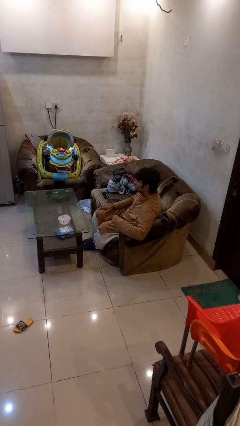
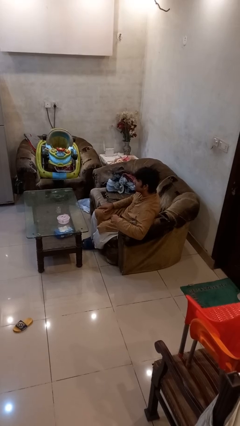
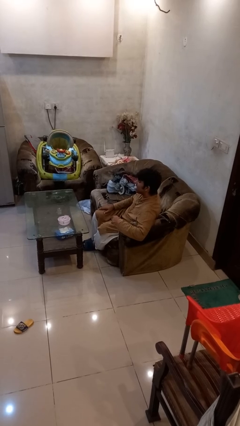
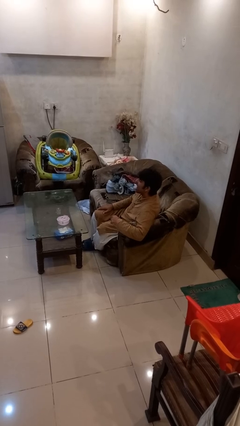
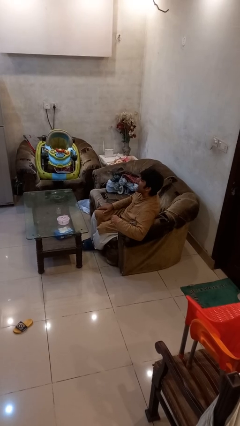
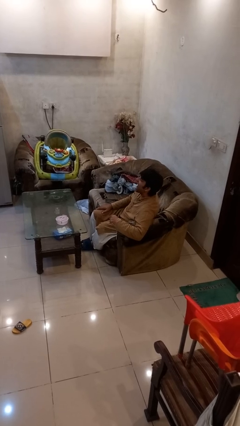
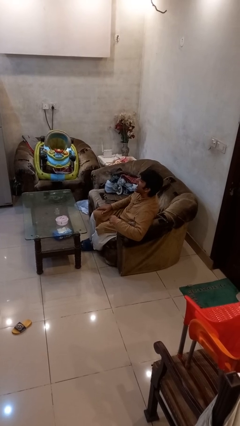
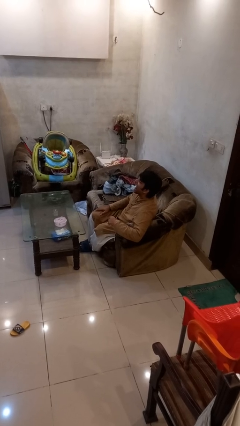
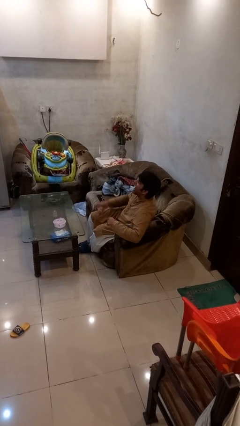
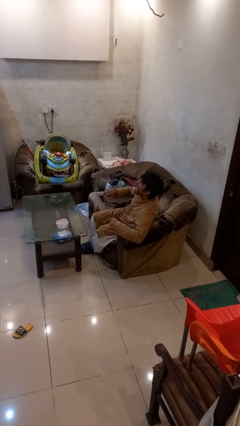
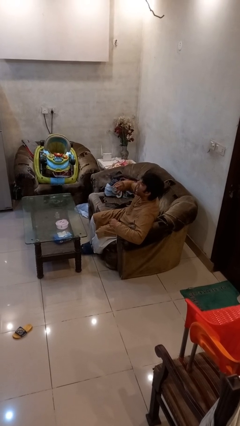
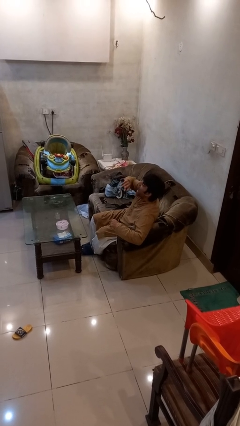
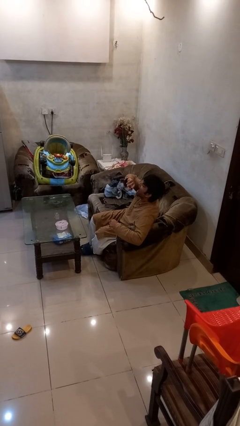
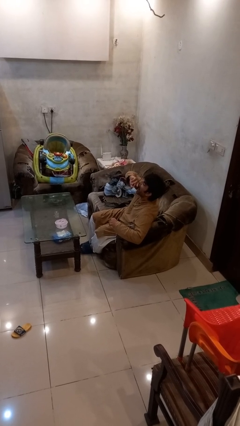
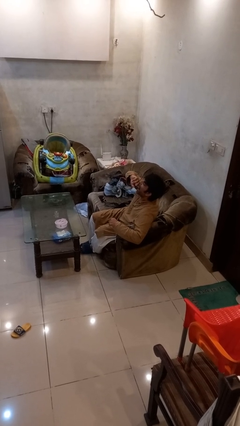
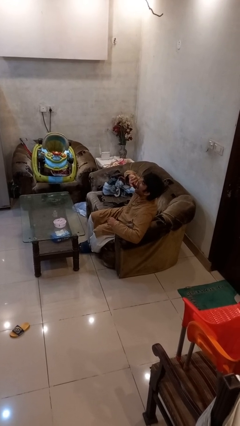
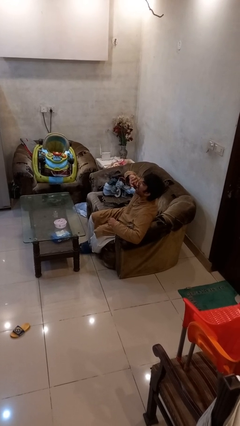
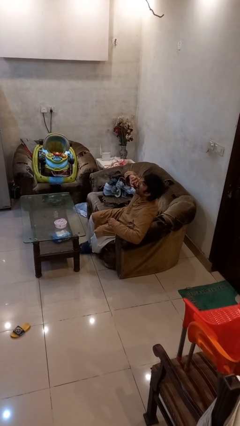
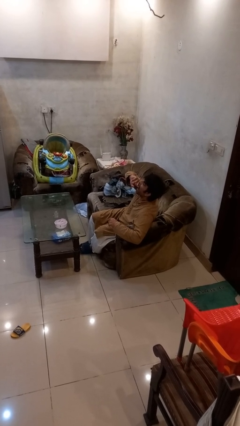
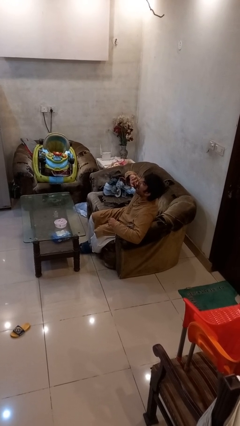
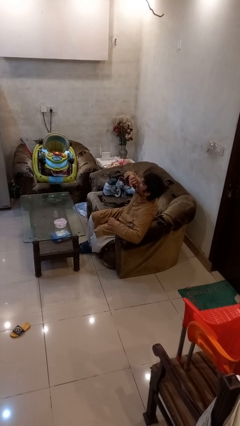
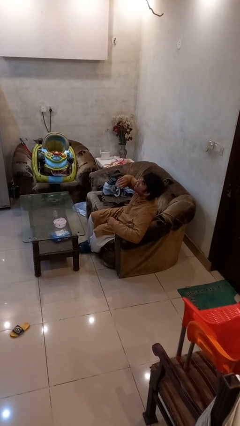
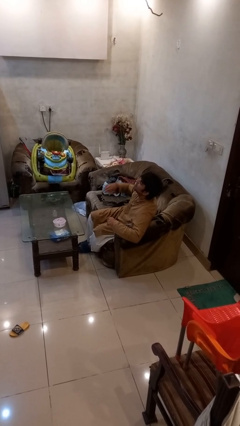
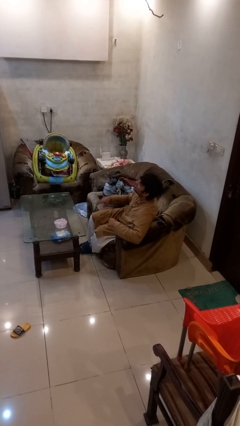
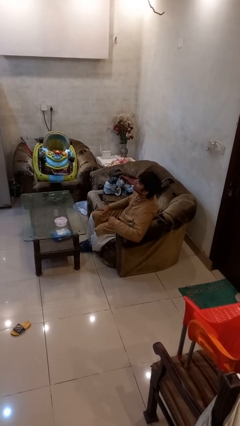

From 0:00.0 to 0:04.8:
person yawns

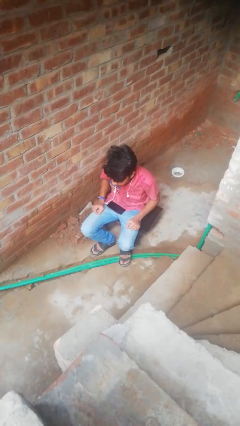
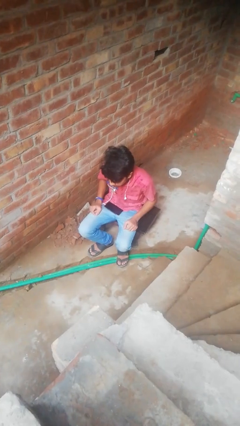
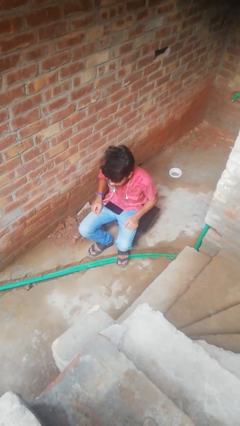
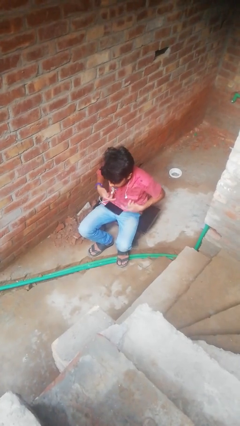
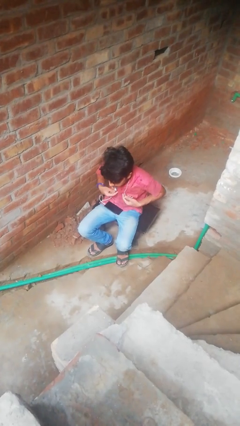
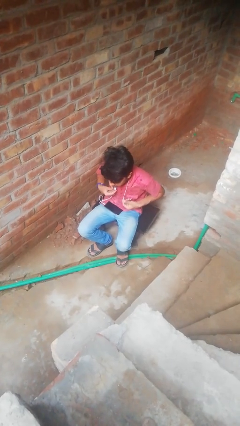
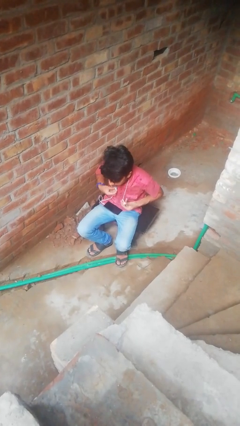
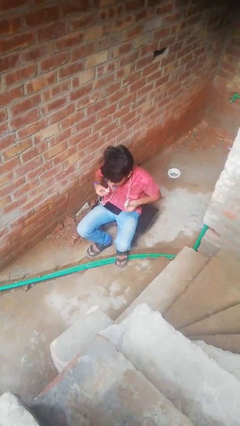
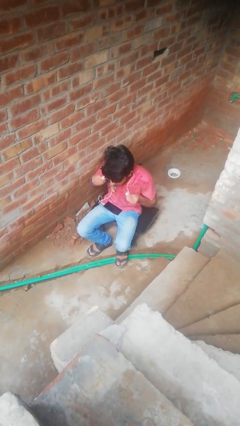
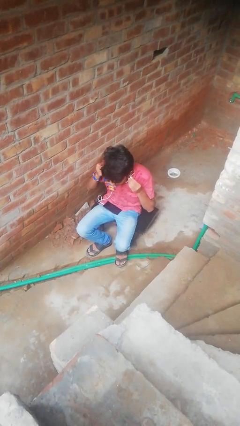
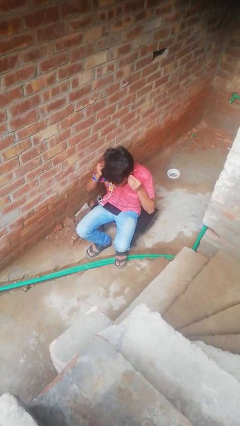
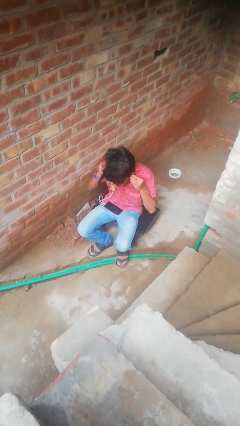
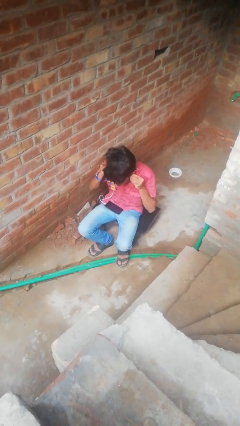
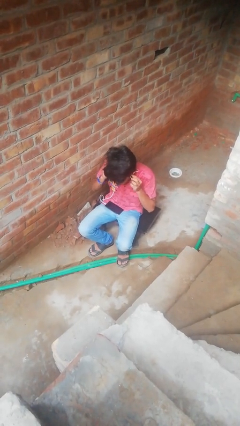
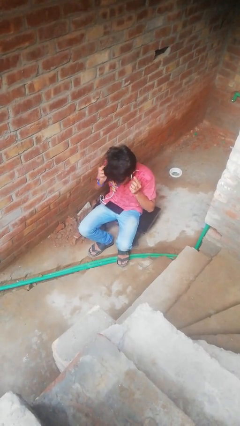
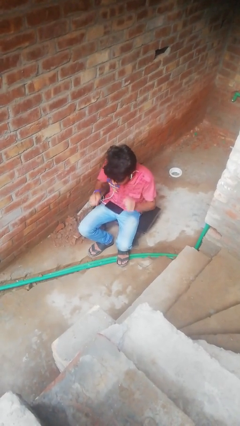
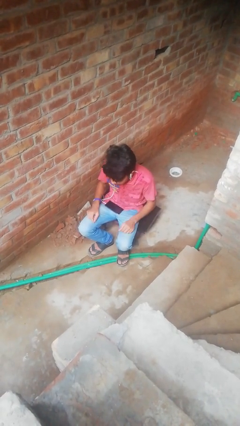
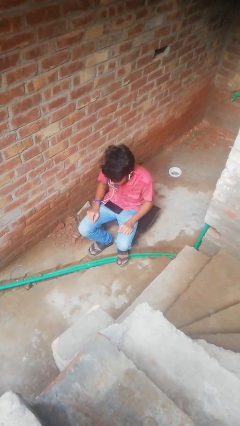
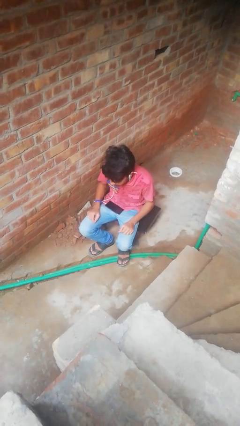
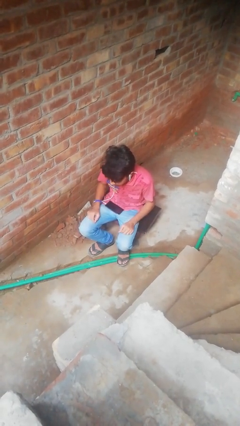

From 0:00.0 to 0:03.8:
person puts on headphones

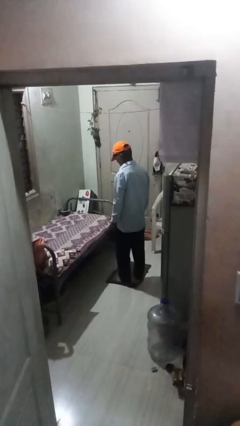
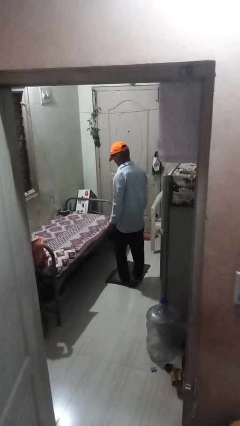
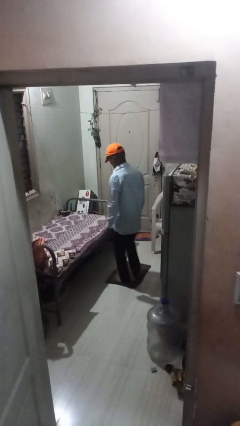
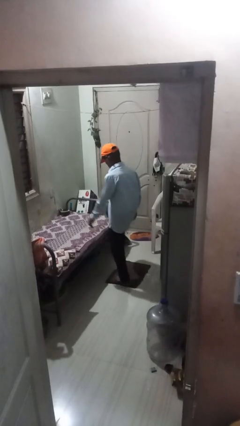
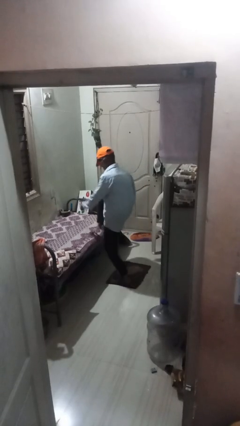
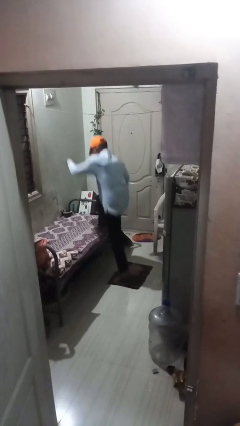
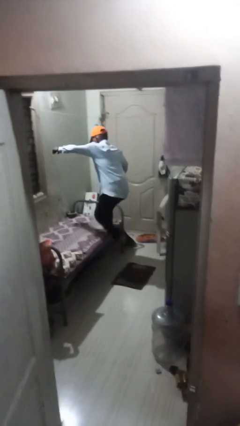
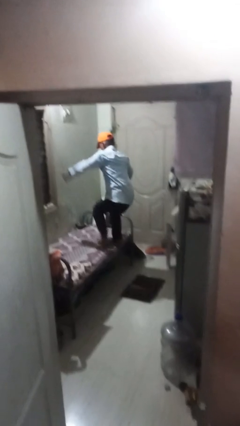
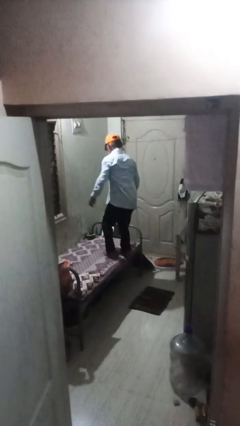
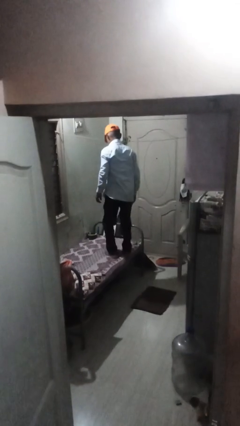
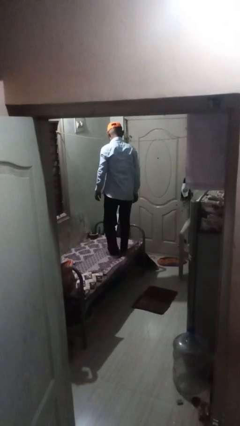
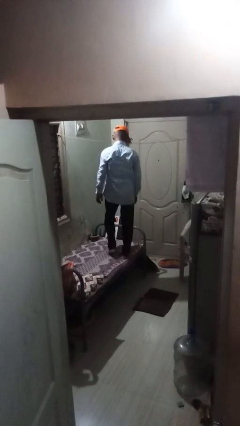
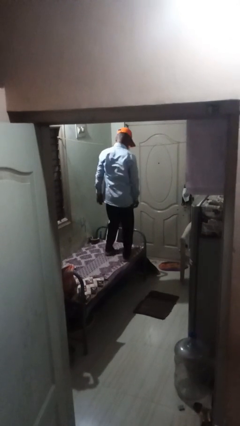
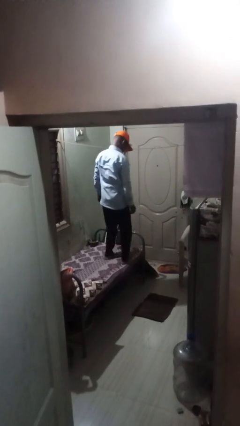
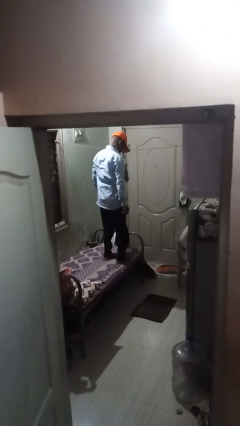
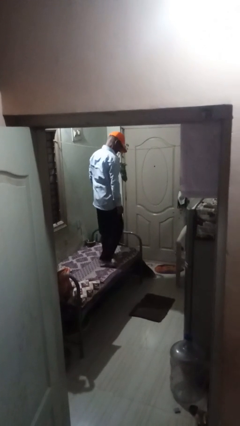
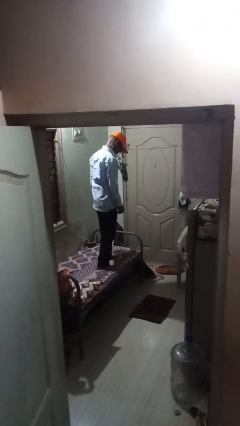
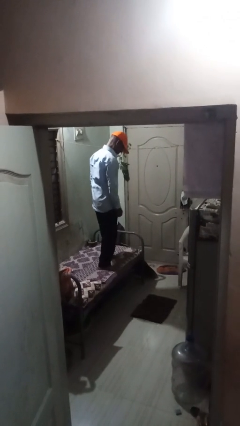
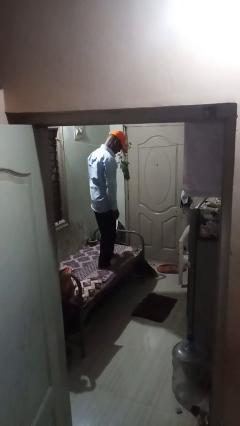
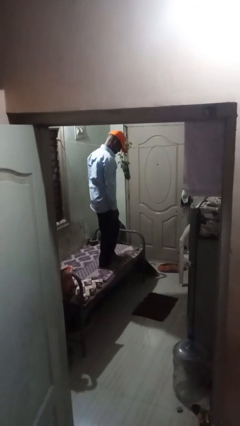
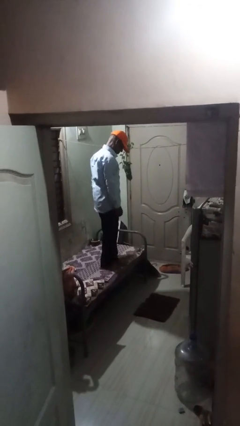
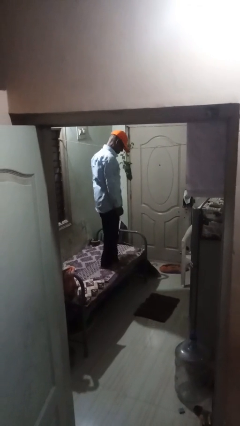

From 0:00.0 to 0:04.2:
person jumps on bed

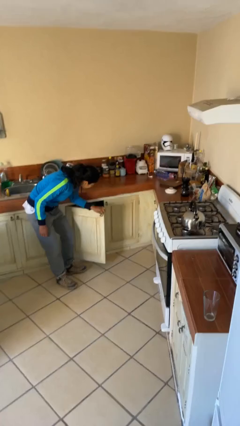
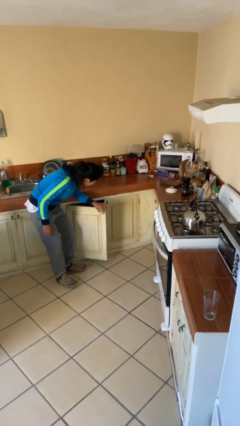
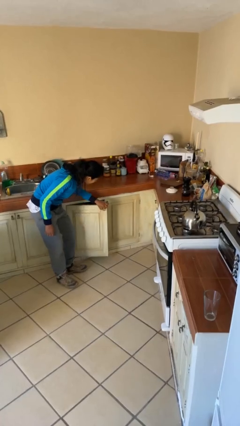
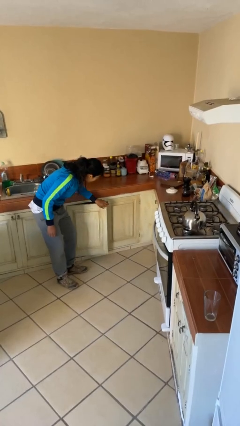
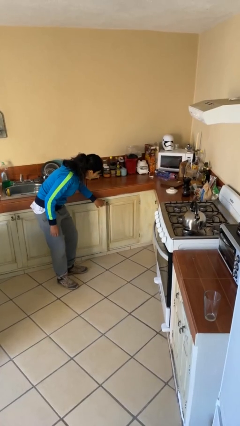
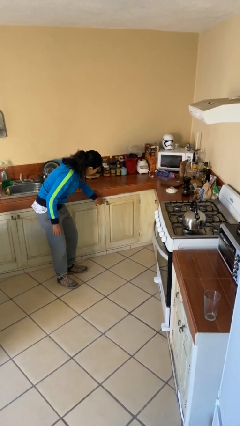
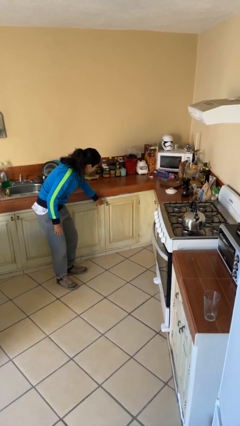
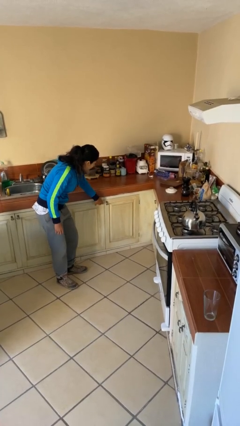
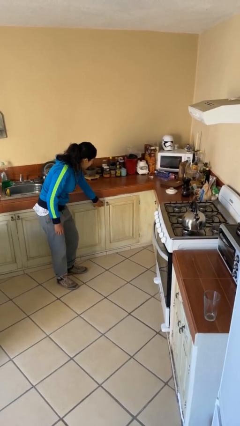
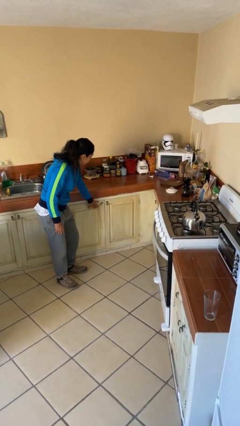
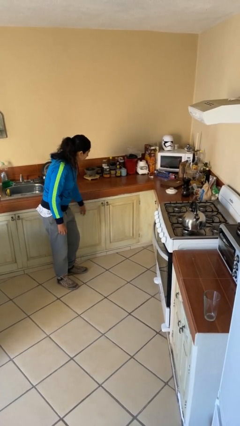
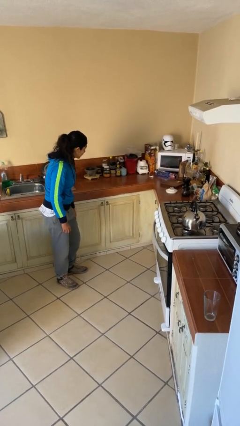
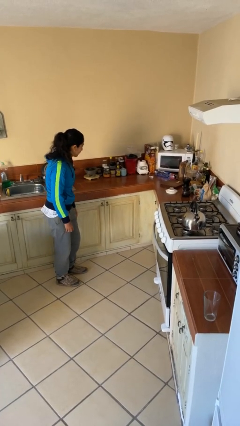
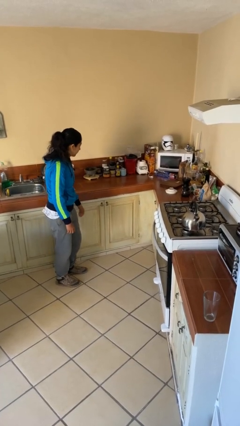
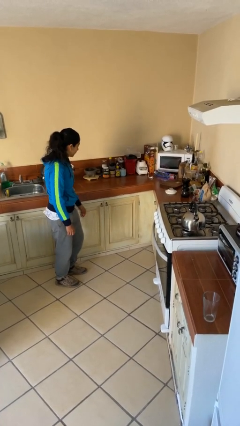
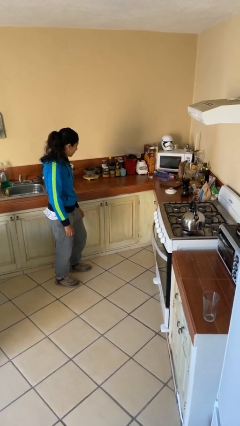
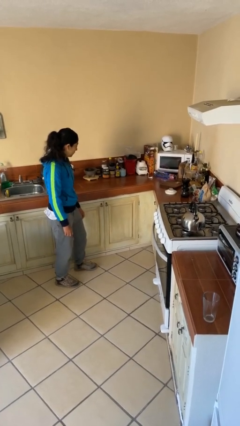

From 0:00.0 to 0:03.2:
person closes cabinet

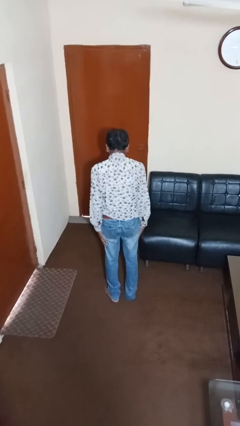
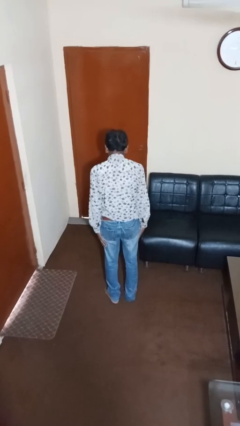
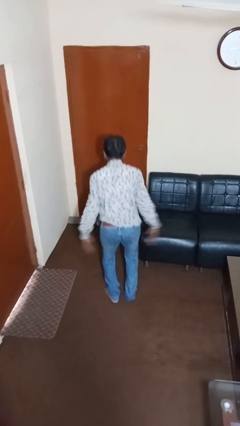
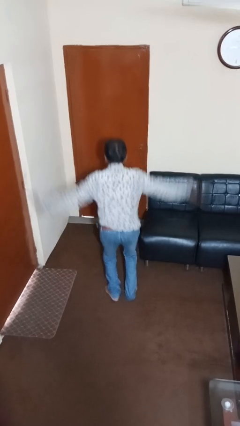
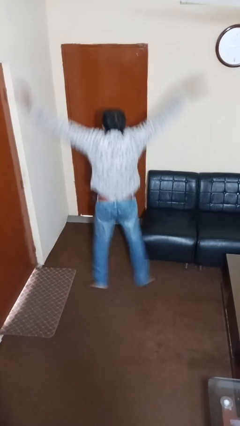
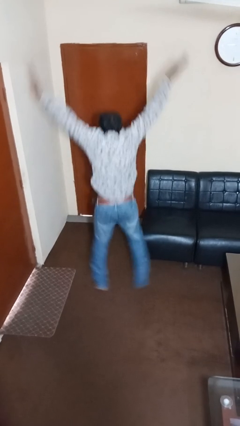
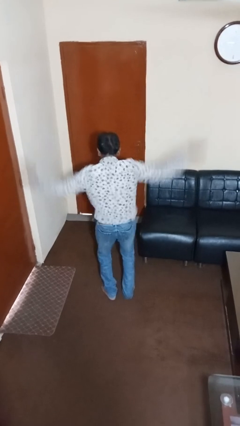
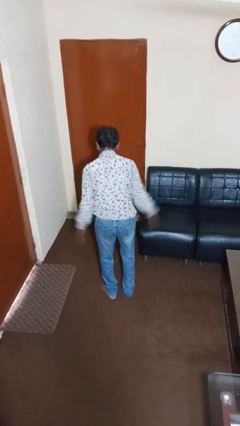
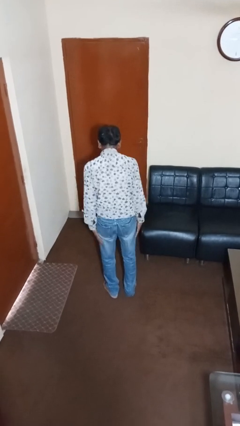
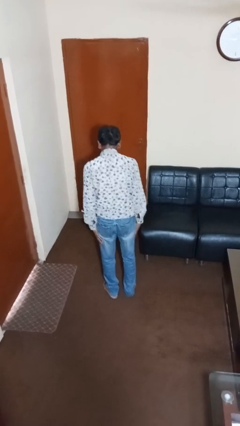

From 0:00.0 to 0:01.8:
person exercises with jumping jacks
